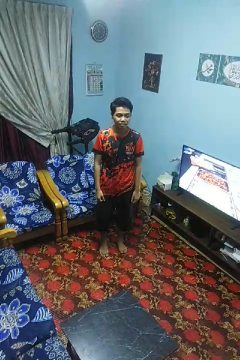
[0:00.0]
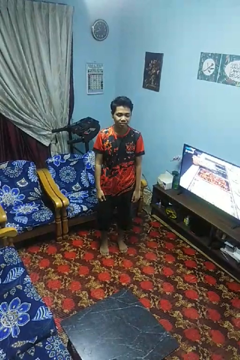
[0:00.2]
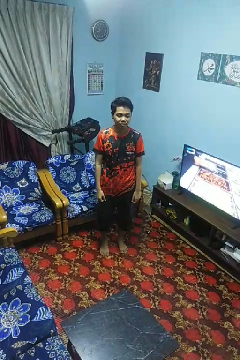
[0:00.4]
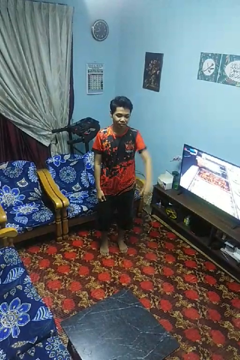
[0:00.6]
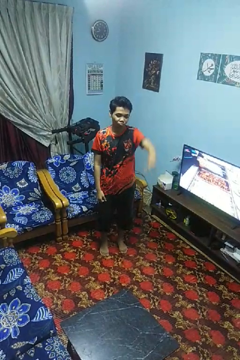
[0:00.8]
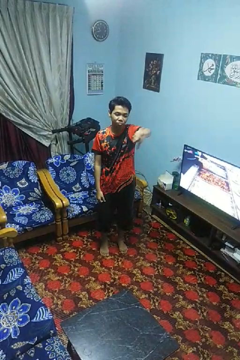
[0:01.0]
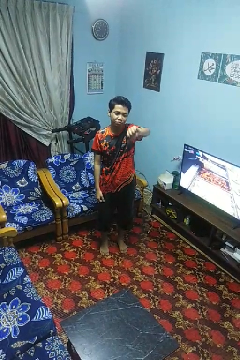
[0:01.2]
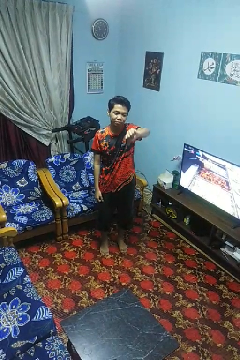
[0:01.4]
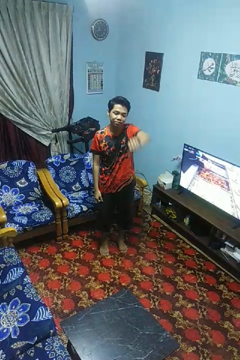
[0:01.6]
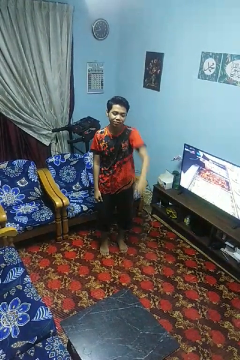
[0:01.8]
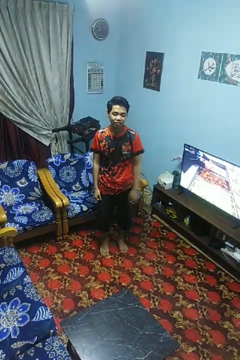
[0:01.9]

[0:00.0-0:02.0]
person gestures thumbs down

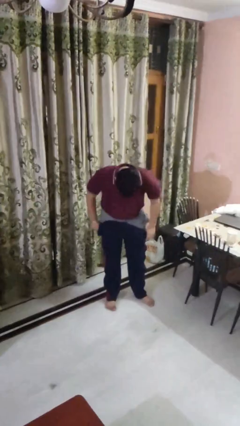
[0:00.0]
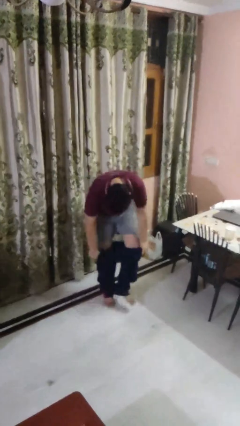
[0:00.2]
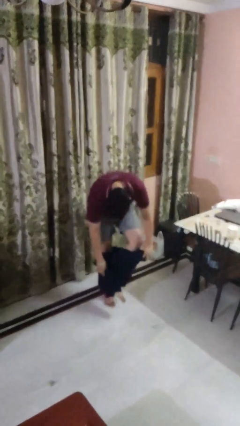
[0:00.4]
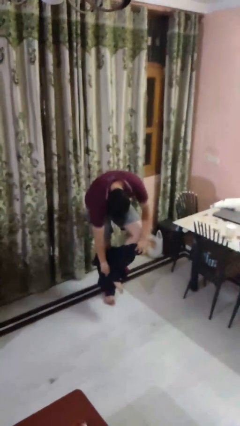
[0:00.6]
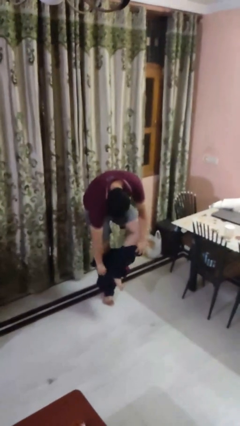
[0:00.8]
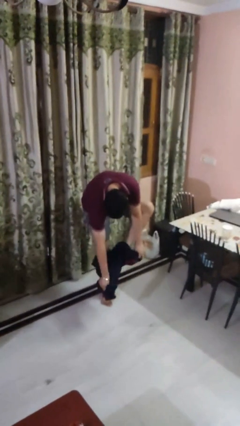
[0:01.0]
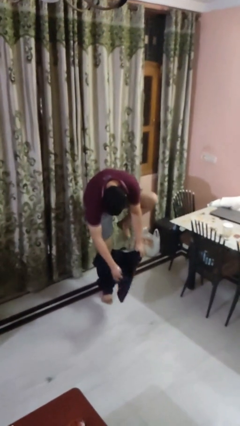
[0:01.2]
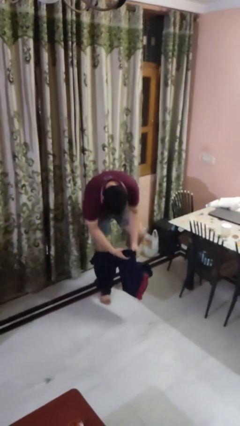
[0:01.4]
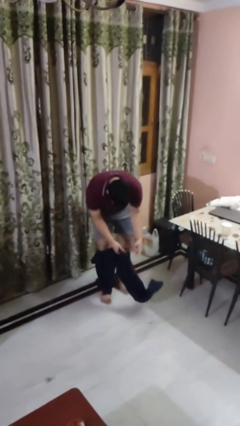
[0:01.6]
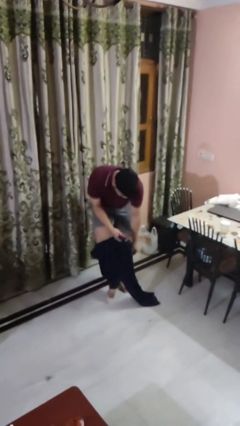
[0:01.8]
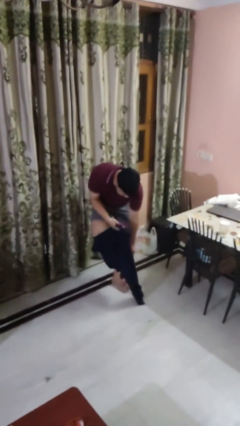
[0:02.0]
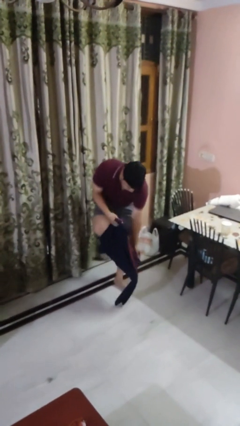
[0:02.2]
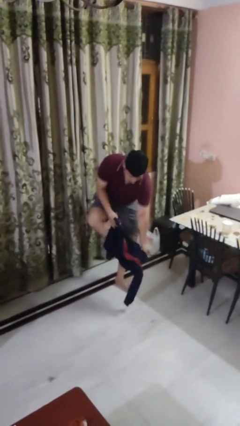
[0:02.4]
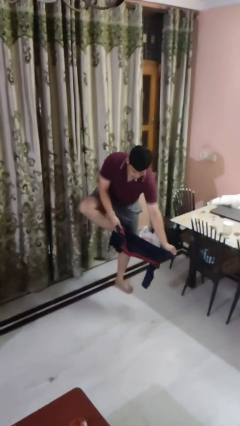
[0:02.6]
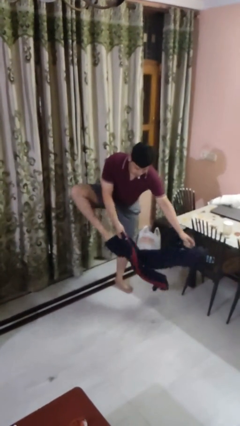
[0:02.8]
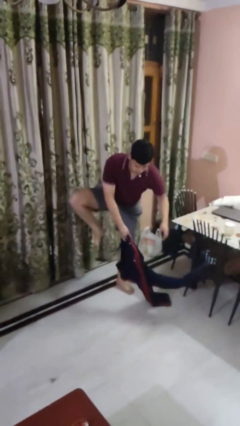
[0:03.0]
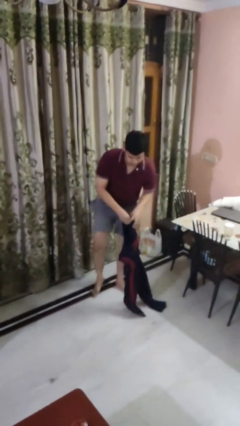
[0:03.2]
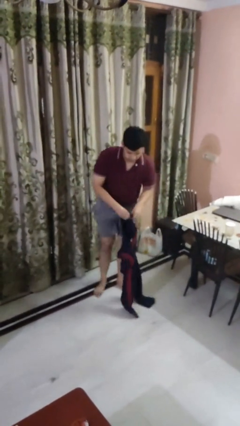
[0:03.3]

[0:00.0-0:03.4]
person takes off pants

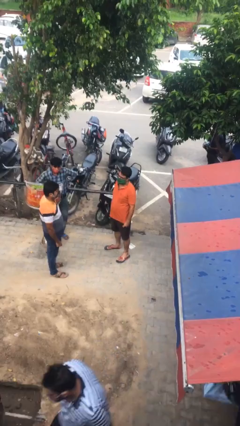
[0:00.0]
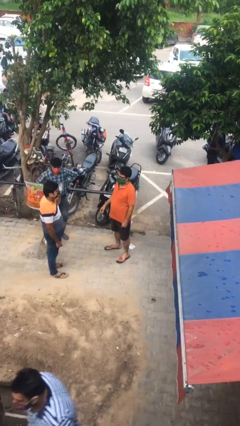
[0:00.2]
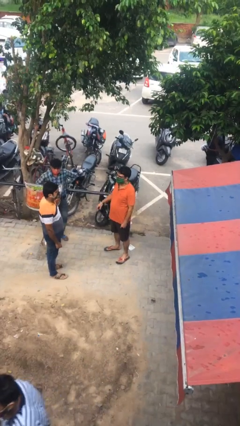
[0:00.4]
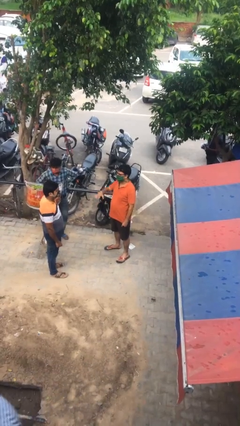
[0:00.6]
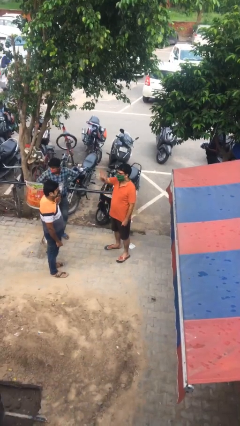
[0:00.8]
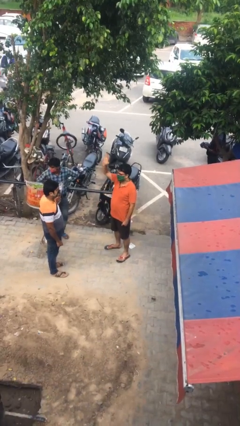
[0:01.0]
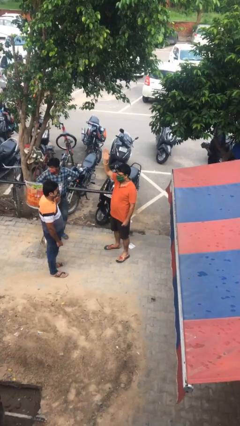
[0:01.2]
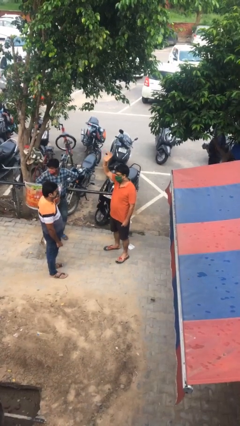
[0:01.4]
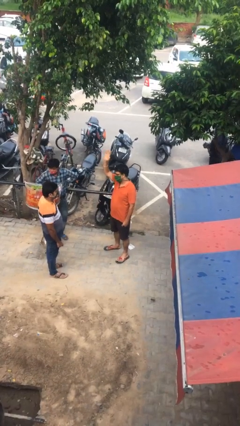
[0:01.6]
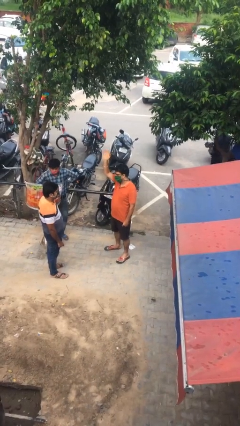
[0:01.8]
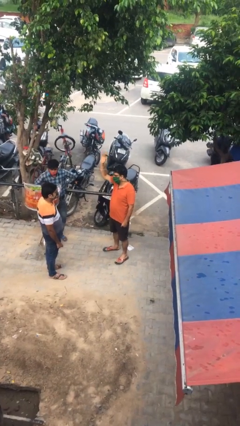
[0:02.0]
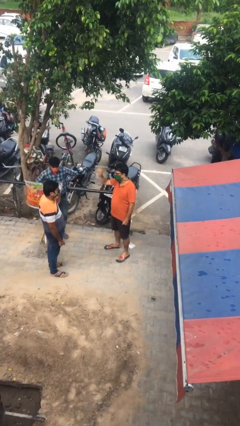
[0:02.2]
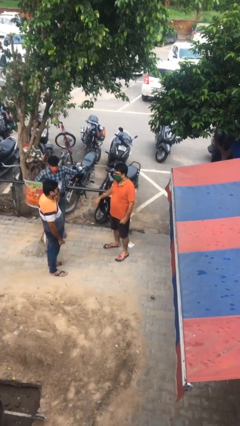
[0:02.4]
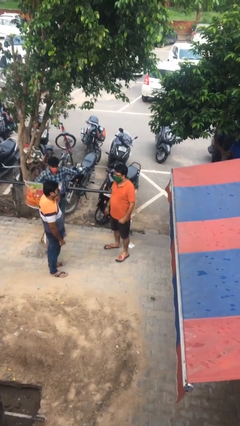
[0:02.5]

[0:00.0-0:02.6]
person waves at person

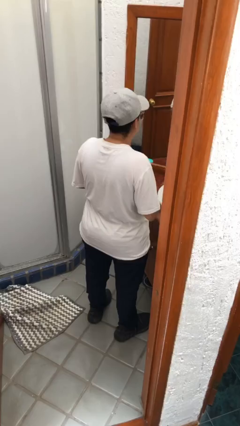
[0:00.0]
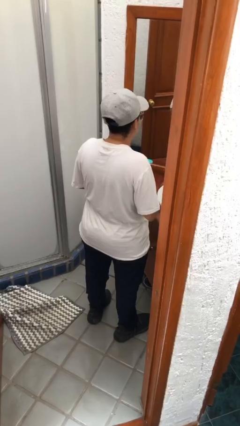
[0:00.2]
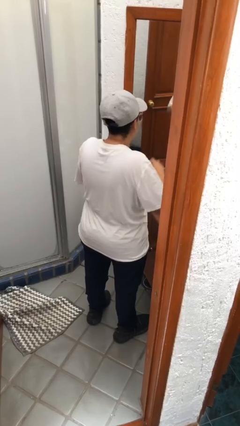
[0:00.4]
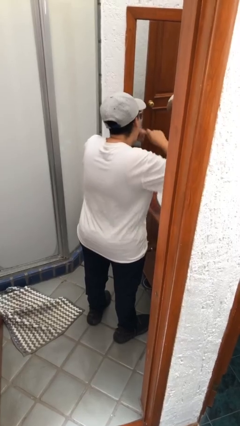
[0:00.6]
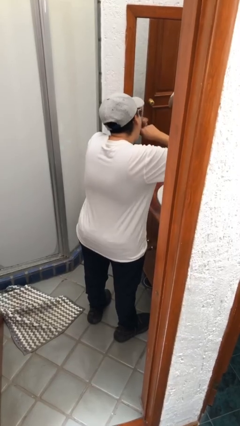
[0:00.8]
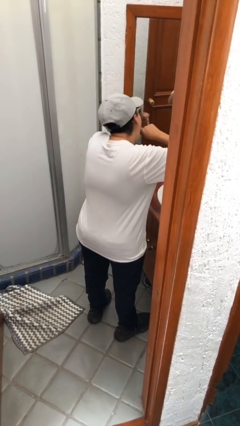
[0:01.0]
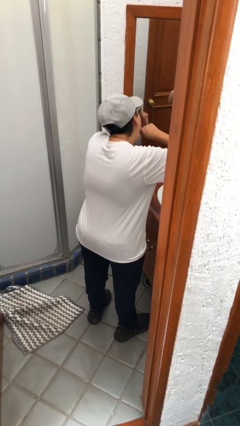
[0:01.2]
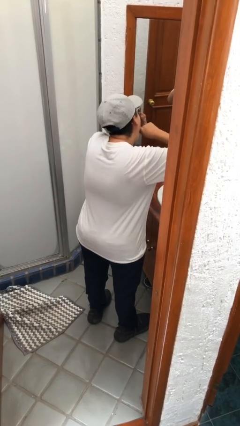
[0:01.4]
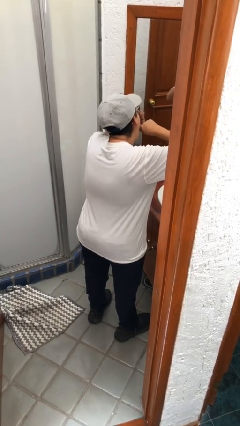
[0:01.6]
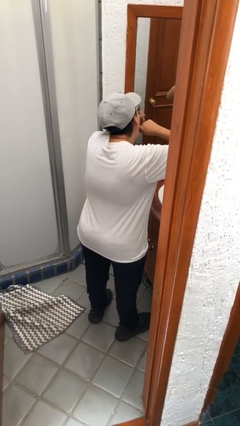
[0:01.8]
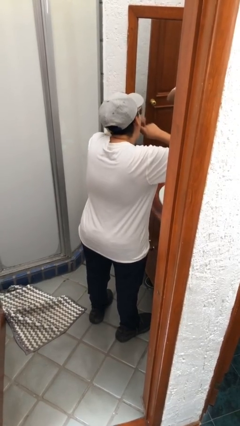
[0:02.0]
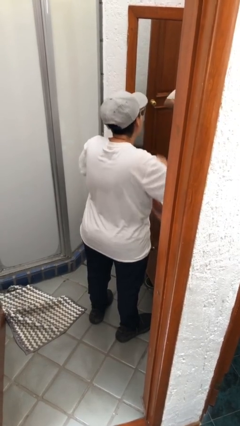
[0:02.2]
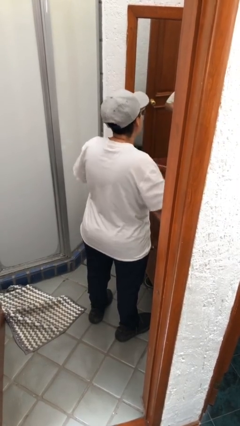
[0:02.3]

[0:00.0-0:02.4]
person flosses

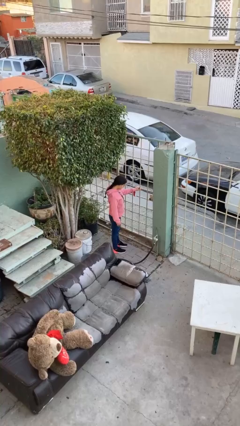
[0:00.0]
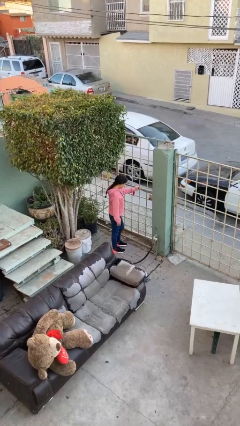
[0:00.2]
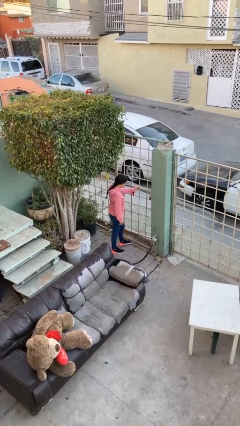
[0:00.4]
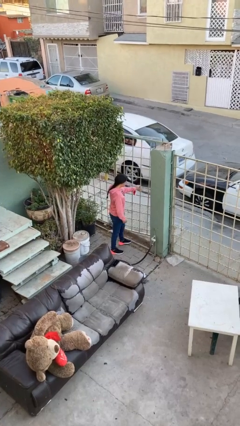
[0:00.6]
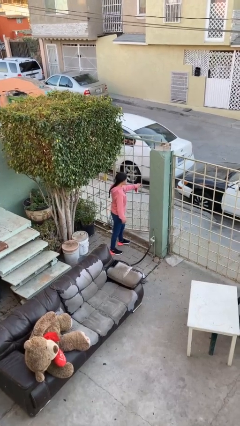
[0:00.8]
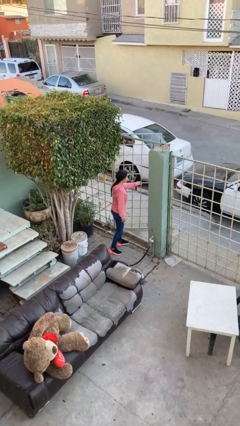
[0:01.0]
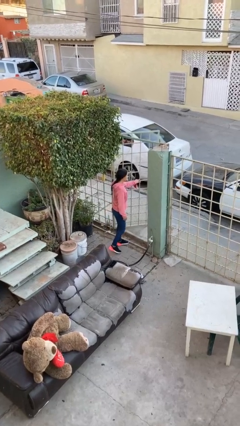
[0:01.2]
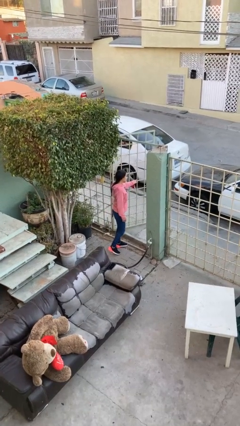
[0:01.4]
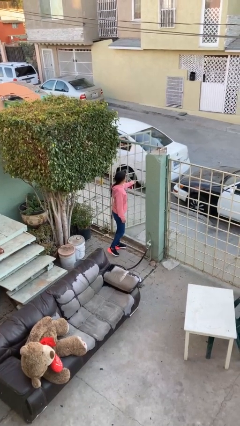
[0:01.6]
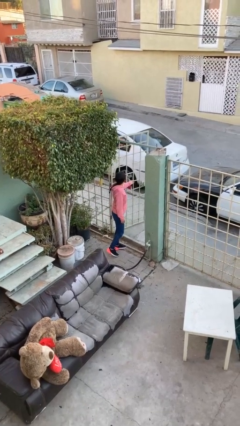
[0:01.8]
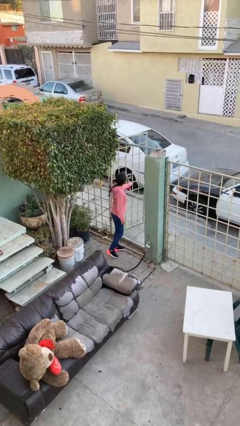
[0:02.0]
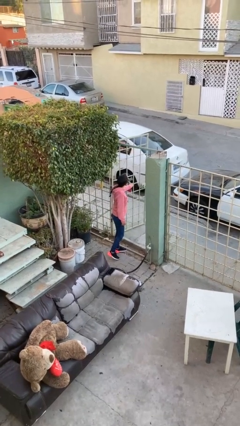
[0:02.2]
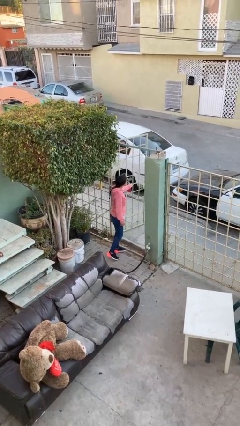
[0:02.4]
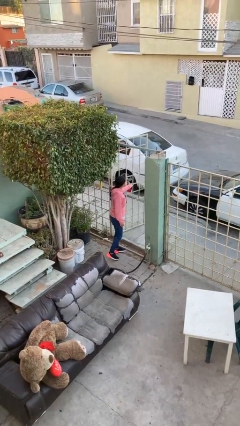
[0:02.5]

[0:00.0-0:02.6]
person opens facility door

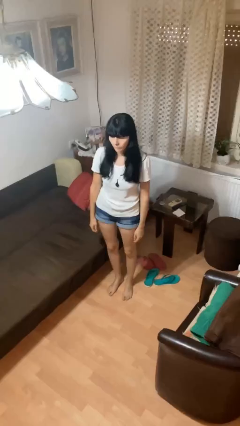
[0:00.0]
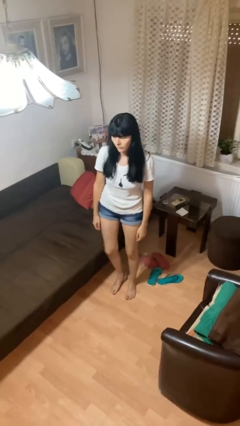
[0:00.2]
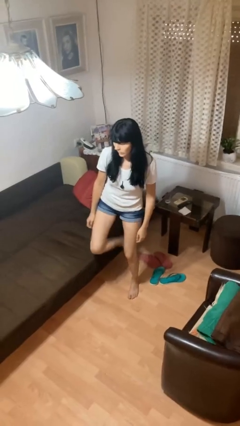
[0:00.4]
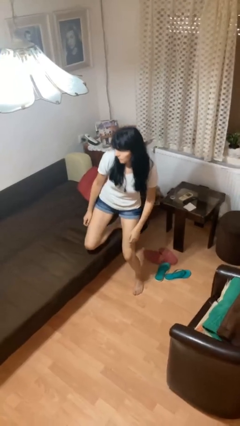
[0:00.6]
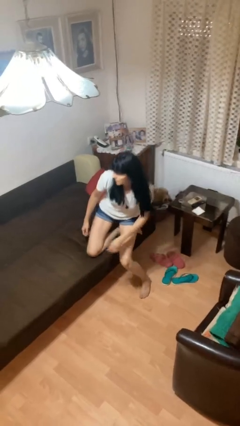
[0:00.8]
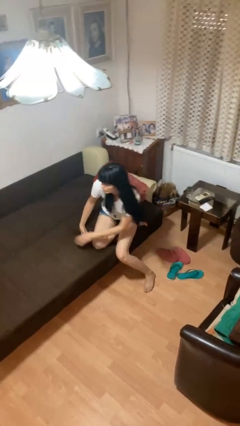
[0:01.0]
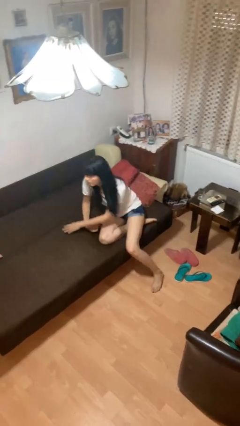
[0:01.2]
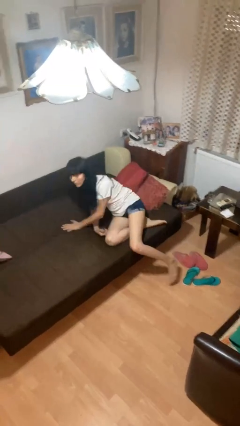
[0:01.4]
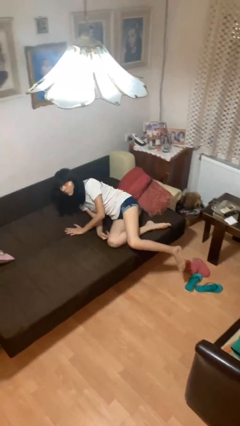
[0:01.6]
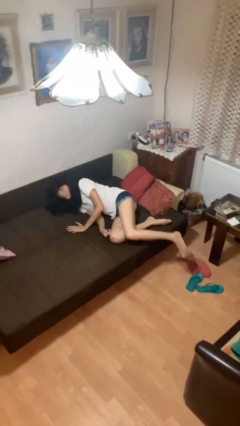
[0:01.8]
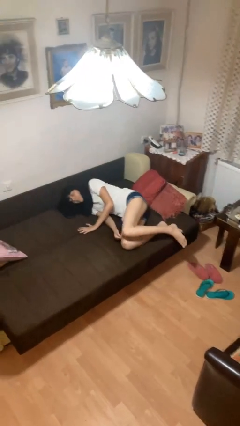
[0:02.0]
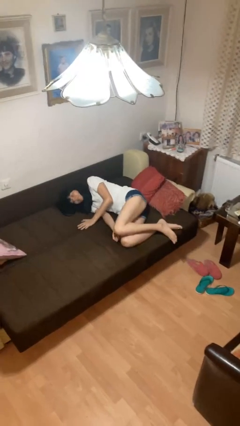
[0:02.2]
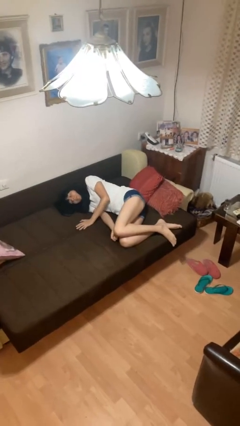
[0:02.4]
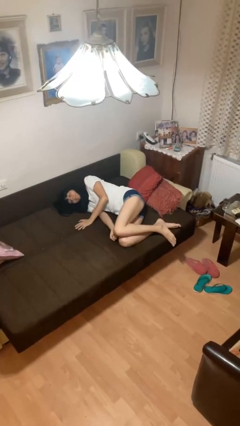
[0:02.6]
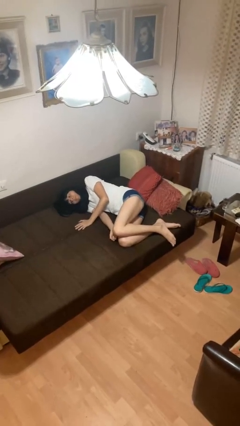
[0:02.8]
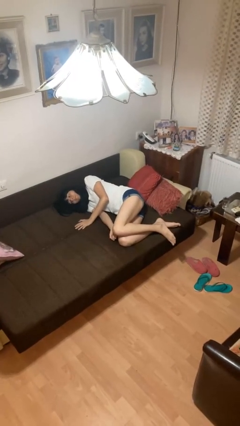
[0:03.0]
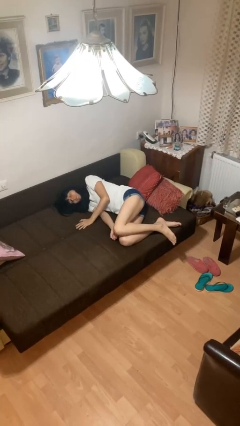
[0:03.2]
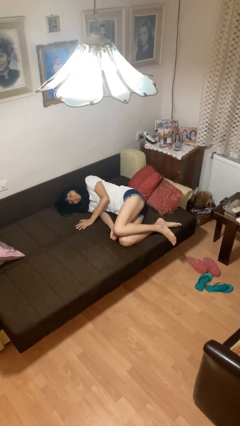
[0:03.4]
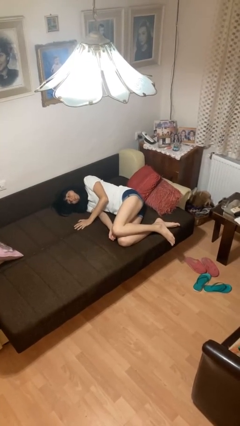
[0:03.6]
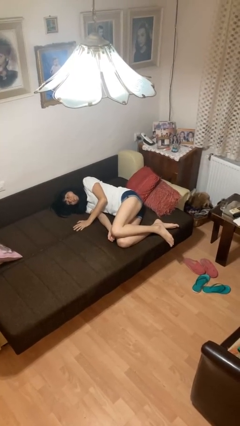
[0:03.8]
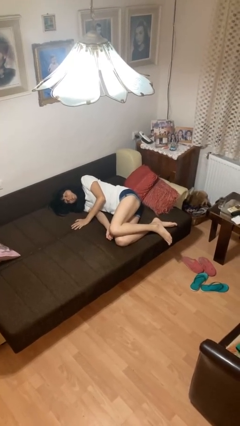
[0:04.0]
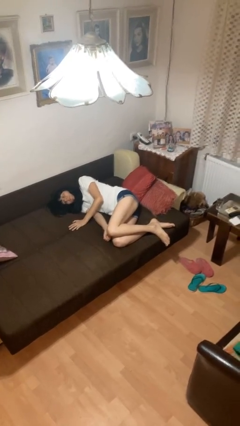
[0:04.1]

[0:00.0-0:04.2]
person lies down on bed

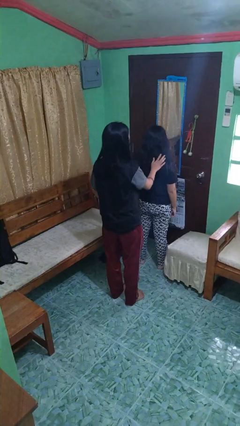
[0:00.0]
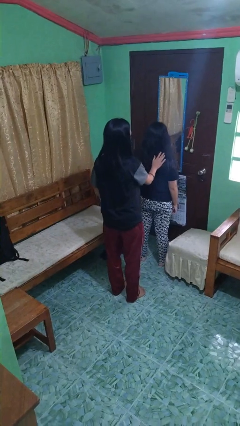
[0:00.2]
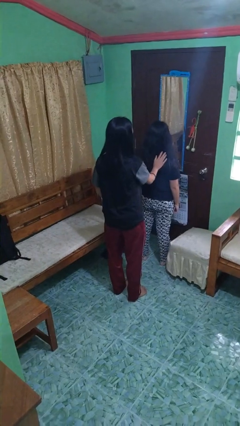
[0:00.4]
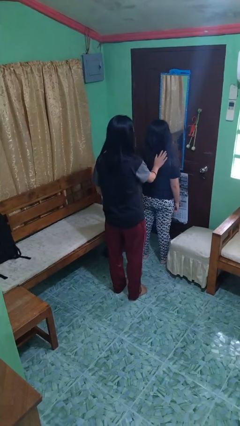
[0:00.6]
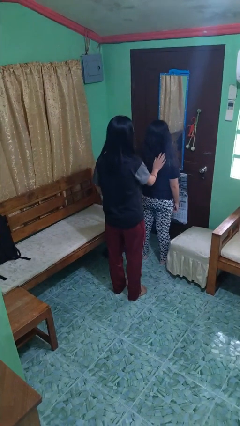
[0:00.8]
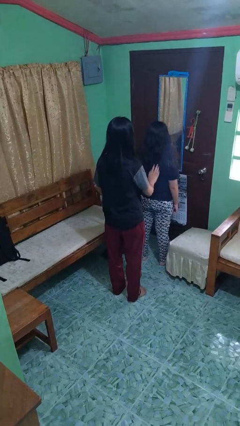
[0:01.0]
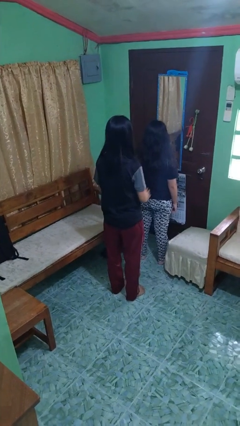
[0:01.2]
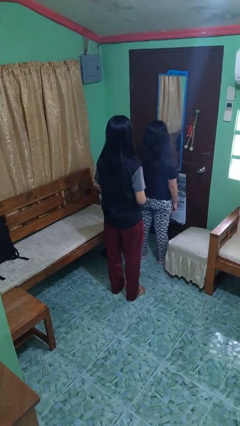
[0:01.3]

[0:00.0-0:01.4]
person touches back of person
